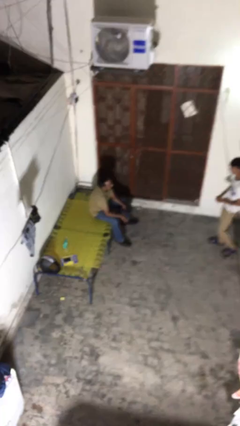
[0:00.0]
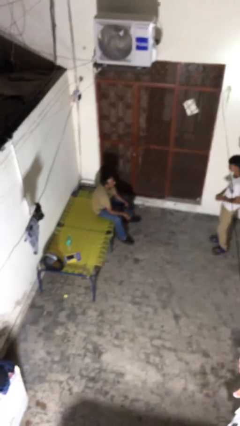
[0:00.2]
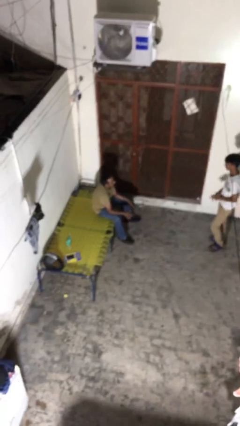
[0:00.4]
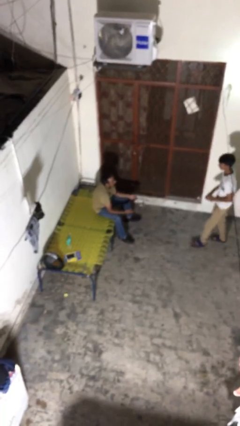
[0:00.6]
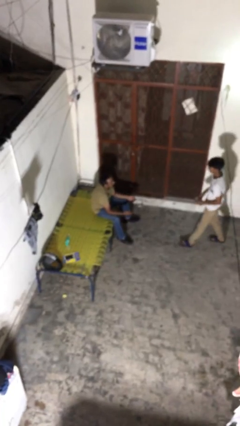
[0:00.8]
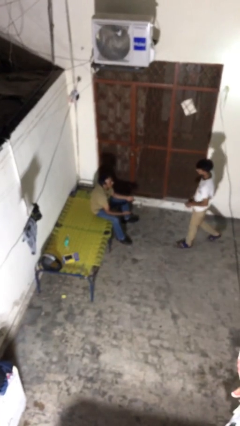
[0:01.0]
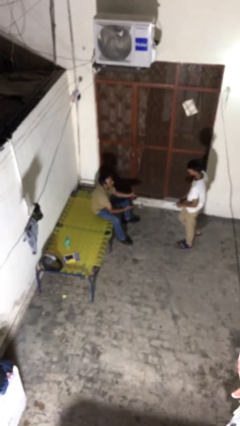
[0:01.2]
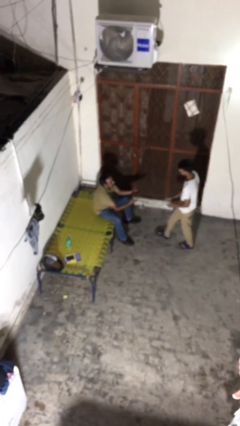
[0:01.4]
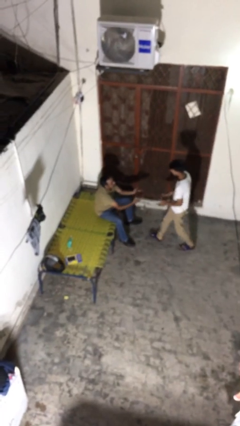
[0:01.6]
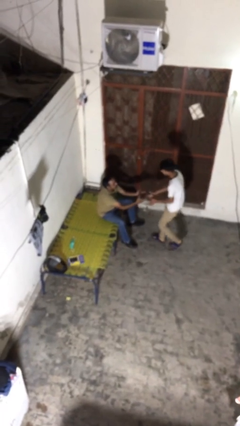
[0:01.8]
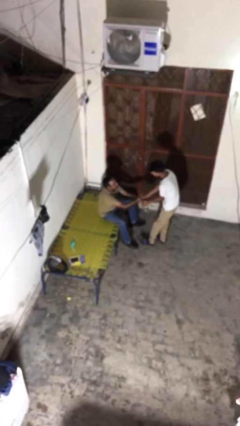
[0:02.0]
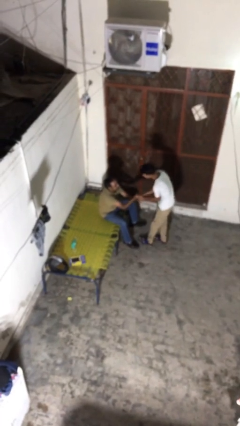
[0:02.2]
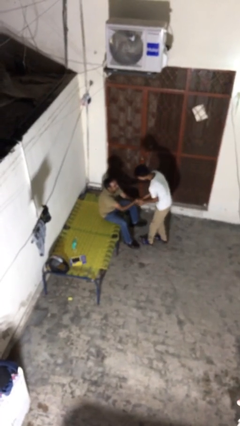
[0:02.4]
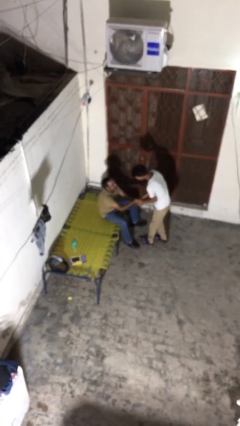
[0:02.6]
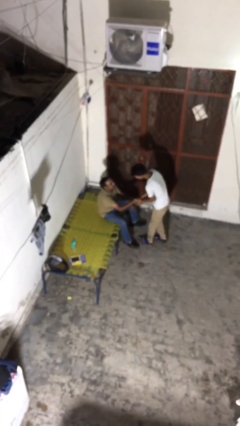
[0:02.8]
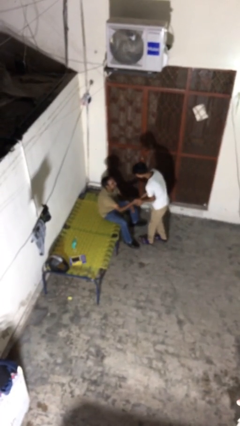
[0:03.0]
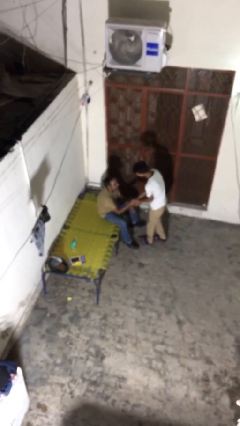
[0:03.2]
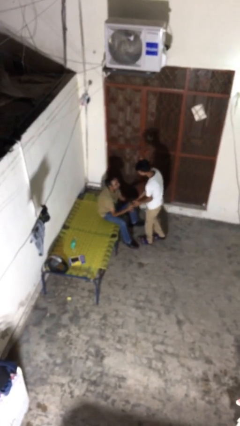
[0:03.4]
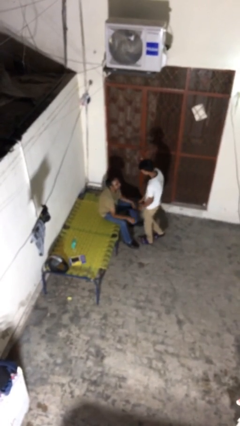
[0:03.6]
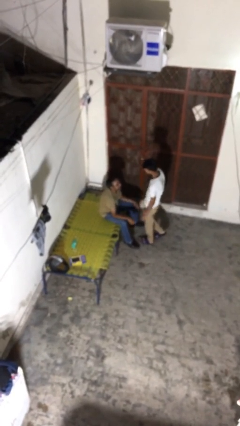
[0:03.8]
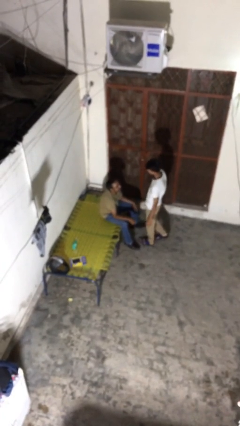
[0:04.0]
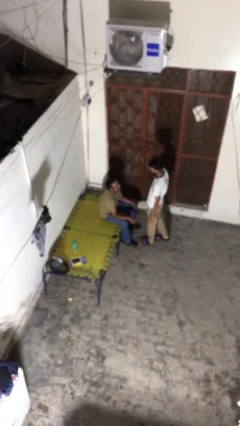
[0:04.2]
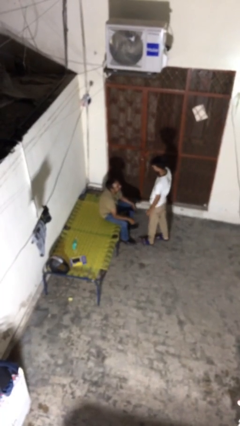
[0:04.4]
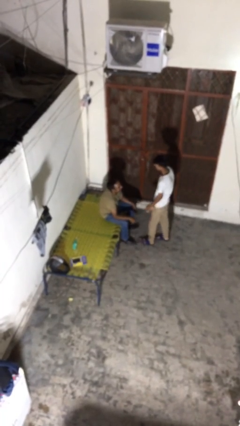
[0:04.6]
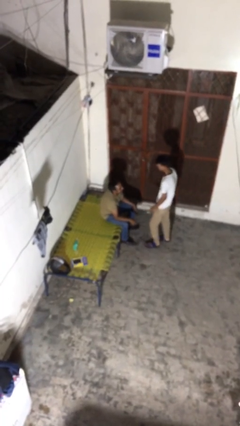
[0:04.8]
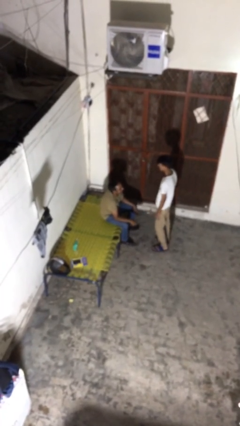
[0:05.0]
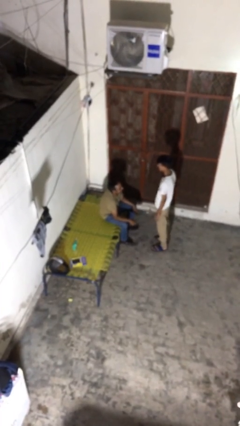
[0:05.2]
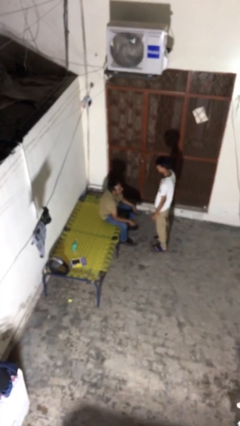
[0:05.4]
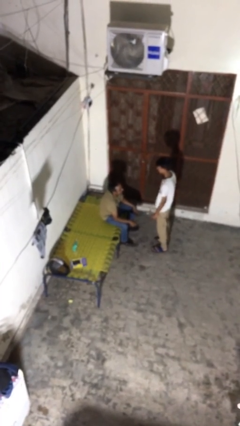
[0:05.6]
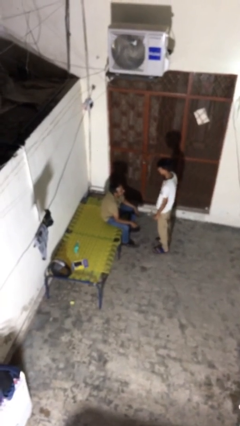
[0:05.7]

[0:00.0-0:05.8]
person shakes hand

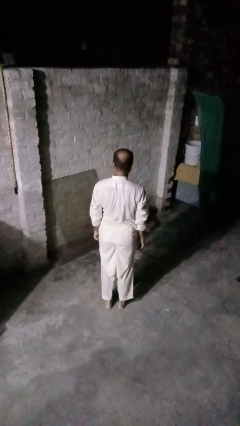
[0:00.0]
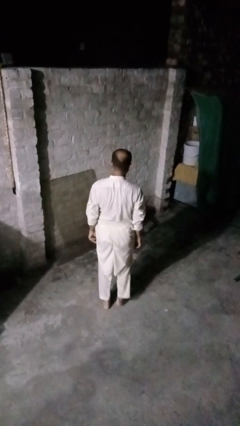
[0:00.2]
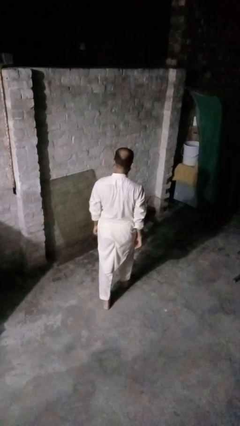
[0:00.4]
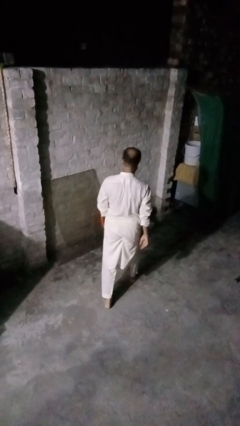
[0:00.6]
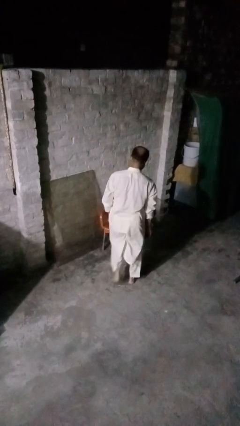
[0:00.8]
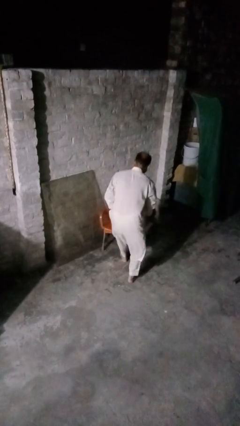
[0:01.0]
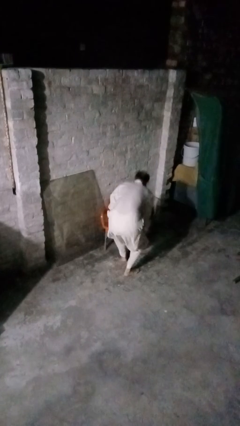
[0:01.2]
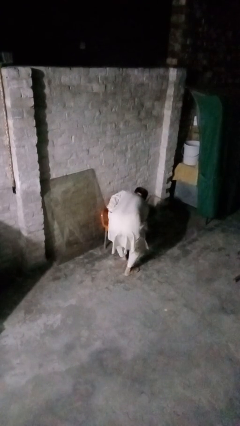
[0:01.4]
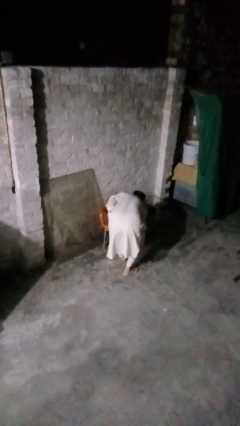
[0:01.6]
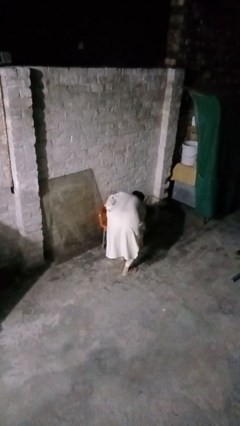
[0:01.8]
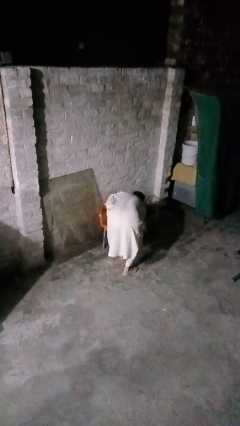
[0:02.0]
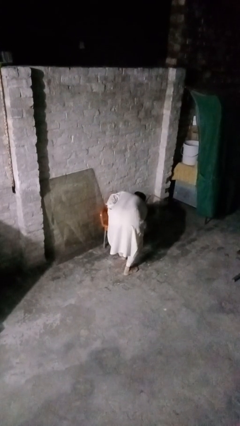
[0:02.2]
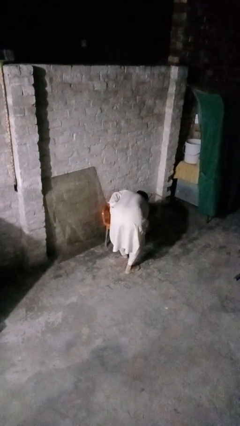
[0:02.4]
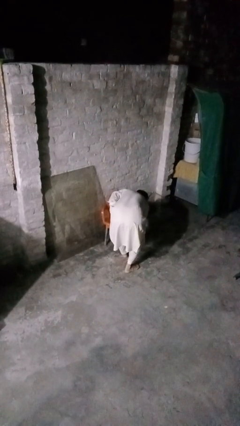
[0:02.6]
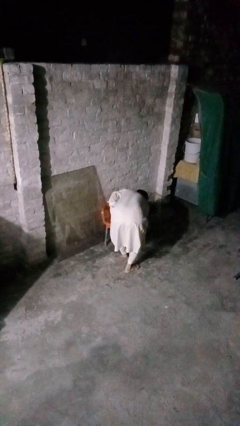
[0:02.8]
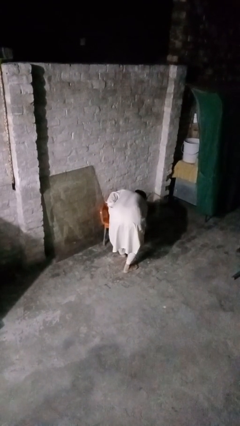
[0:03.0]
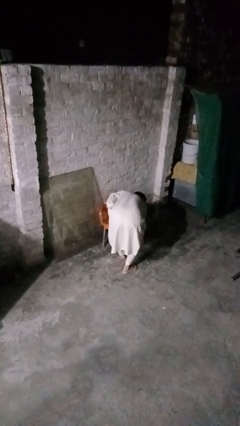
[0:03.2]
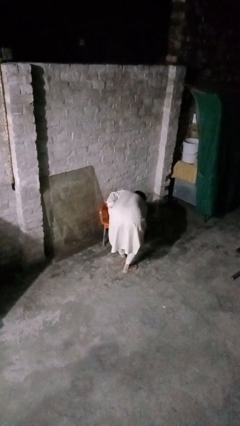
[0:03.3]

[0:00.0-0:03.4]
person stubs toe

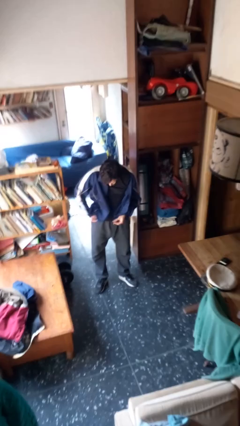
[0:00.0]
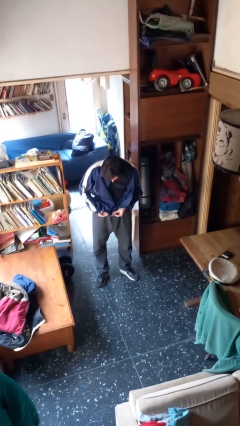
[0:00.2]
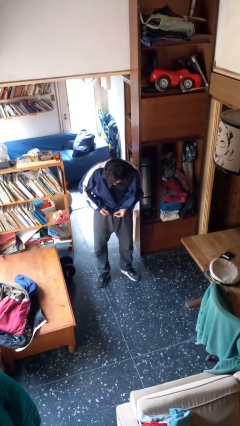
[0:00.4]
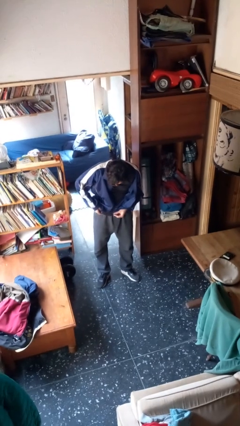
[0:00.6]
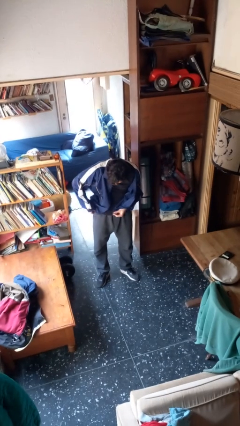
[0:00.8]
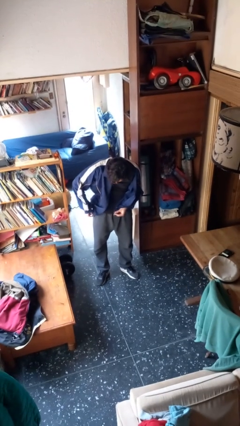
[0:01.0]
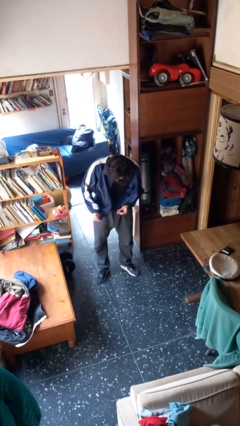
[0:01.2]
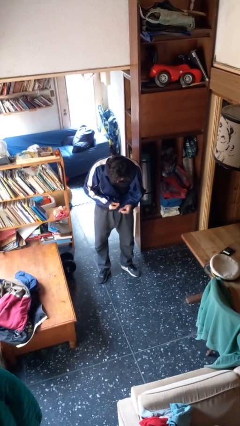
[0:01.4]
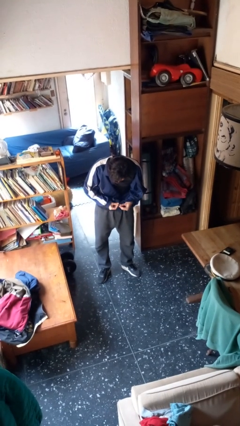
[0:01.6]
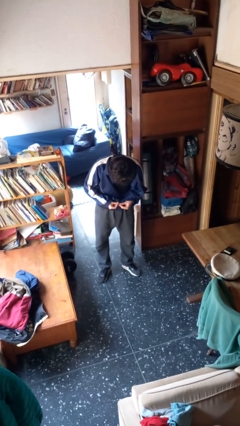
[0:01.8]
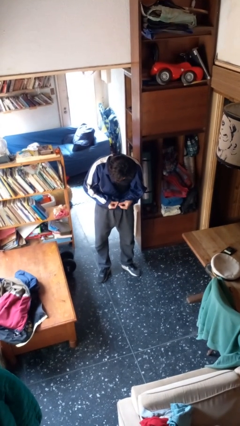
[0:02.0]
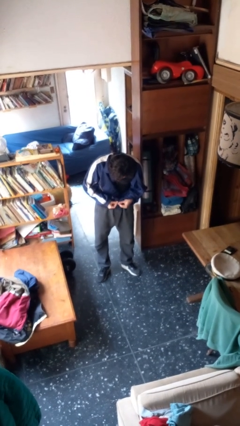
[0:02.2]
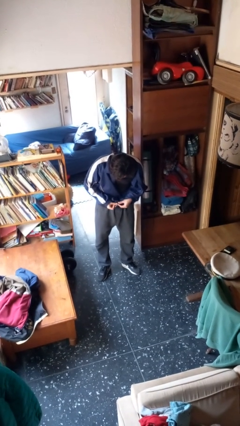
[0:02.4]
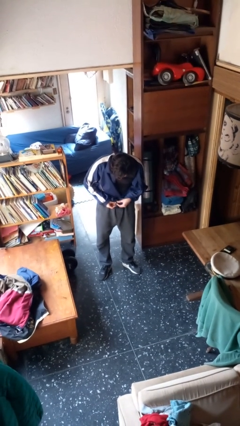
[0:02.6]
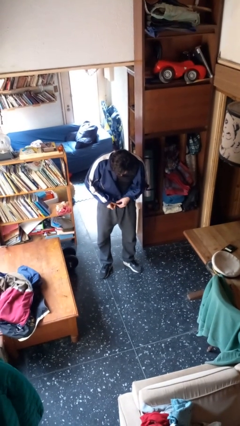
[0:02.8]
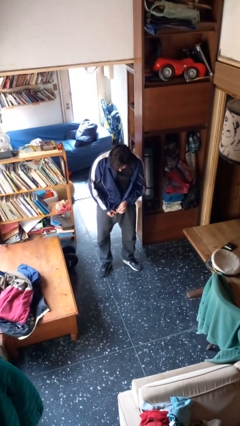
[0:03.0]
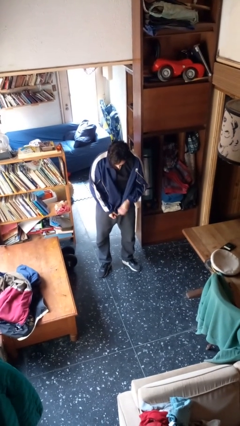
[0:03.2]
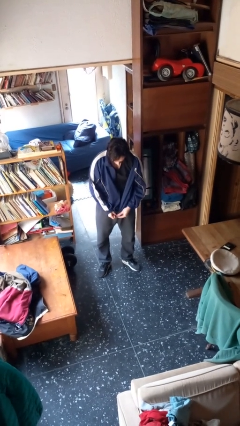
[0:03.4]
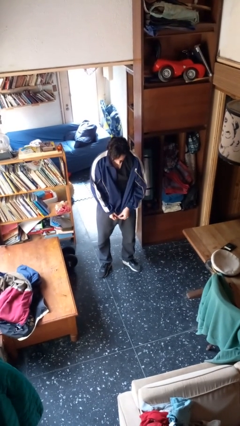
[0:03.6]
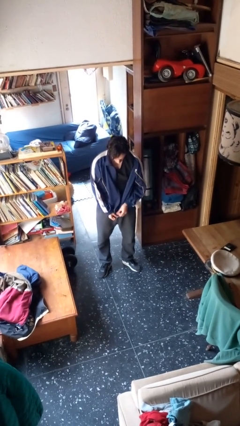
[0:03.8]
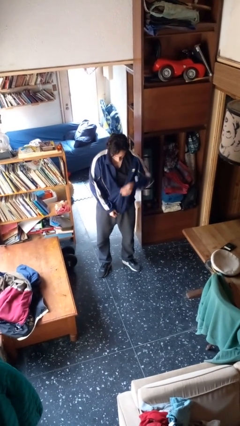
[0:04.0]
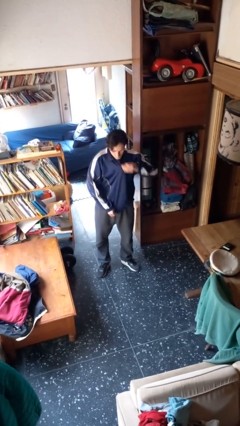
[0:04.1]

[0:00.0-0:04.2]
person zips up jacket

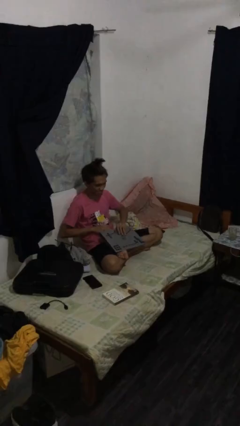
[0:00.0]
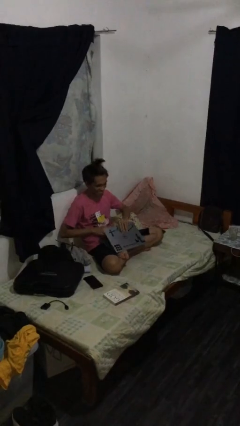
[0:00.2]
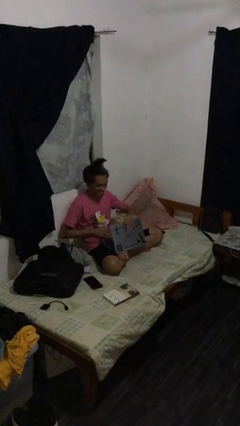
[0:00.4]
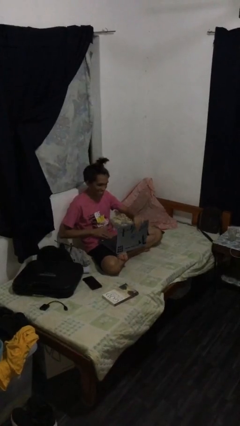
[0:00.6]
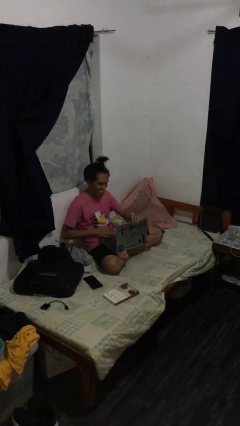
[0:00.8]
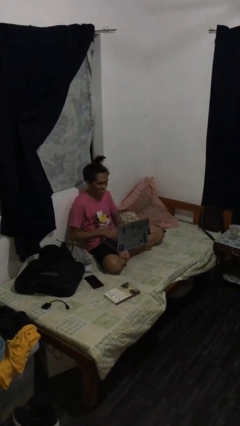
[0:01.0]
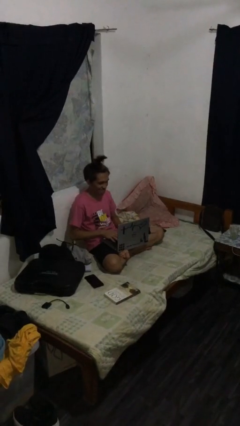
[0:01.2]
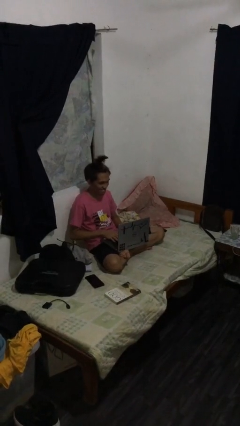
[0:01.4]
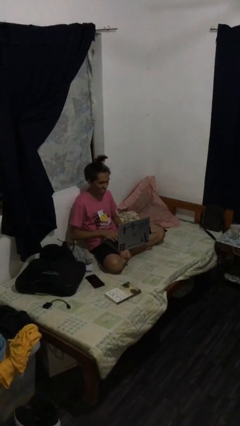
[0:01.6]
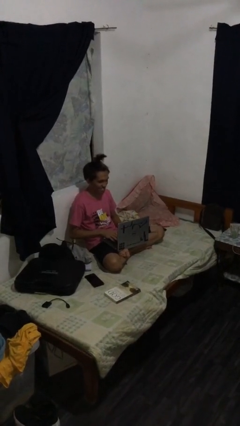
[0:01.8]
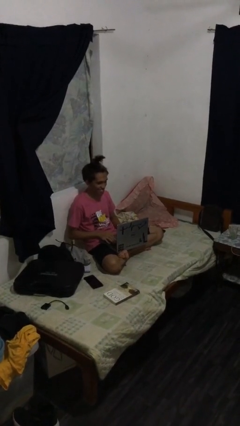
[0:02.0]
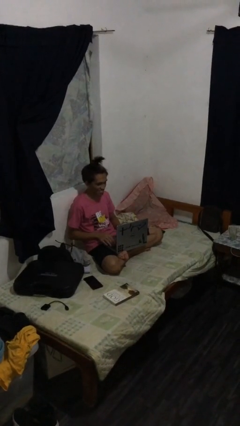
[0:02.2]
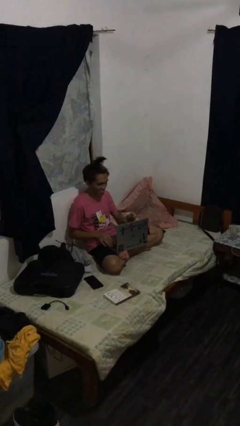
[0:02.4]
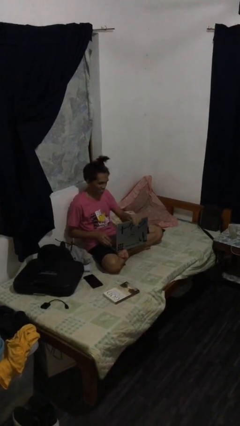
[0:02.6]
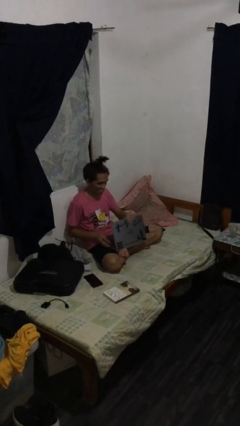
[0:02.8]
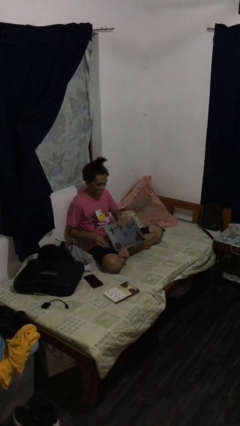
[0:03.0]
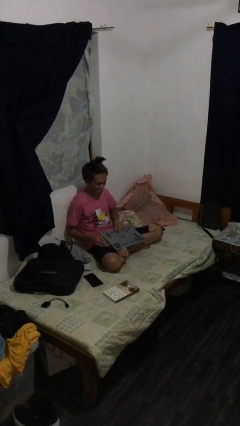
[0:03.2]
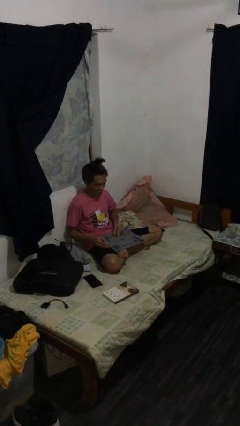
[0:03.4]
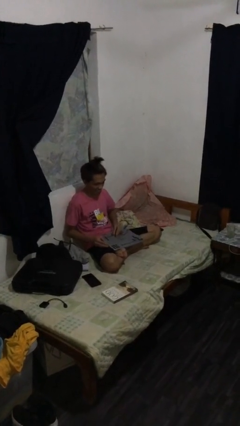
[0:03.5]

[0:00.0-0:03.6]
person interacts with laptop

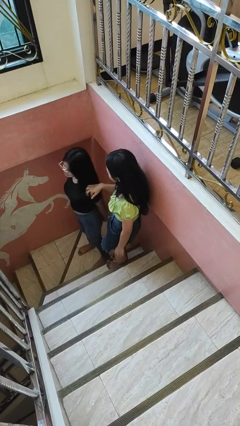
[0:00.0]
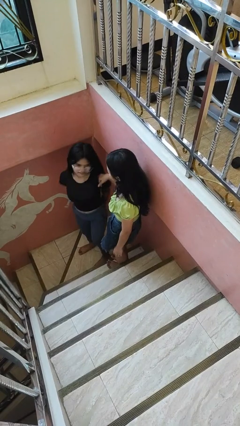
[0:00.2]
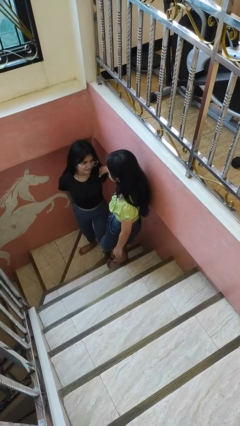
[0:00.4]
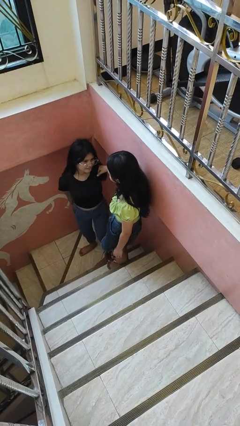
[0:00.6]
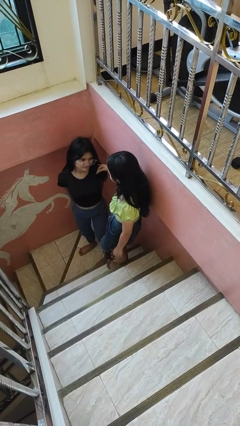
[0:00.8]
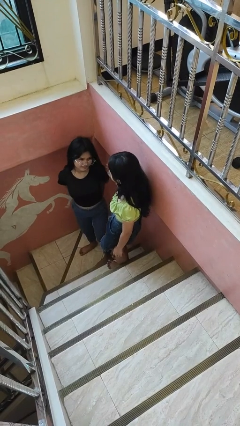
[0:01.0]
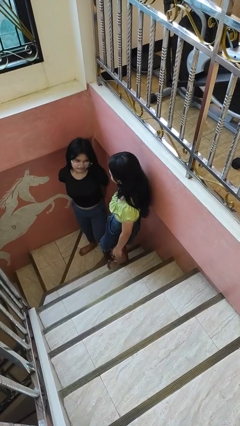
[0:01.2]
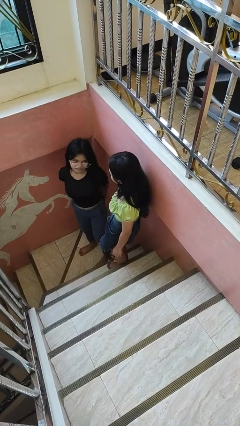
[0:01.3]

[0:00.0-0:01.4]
person spins person around
